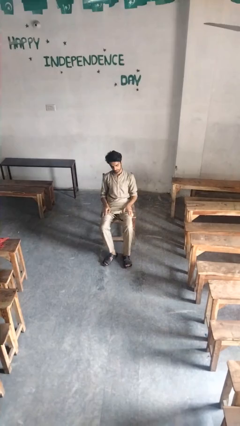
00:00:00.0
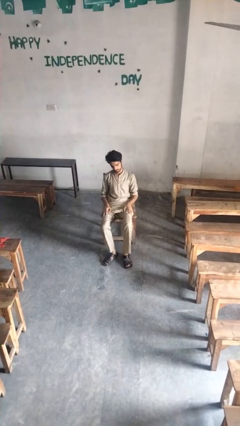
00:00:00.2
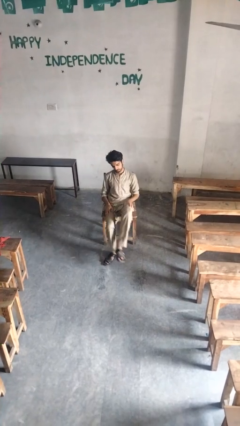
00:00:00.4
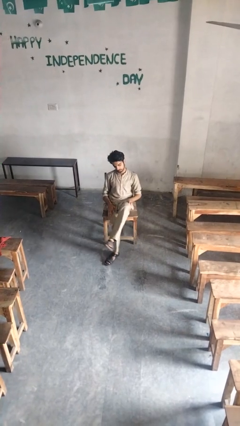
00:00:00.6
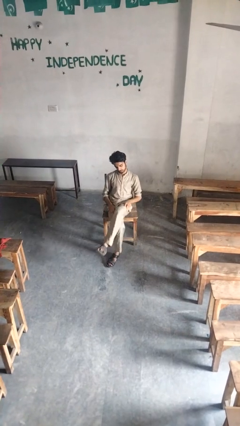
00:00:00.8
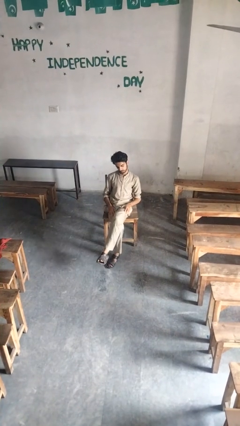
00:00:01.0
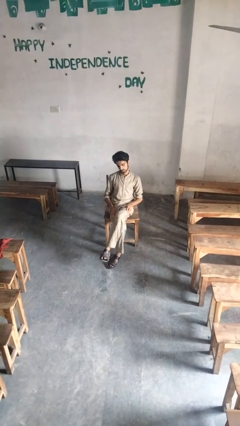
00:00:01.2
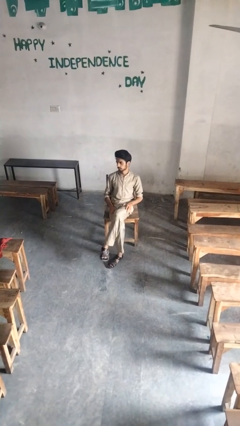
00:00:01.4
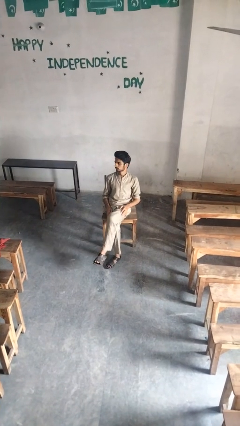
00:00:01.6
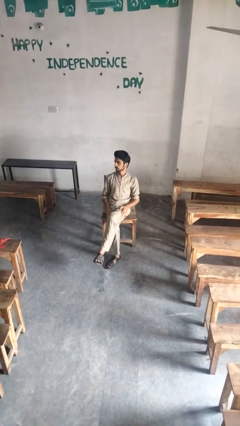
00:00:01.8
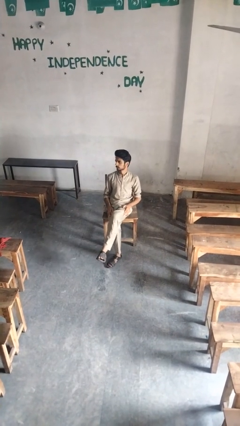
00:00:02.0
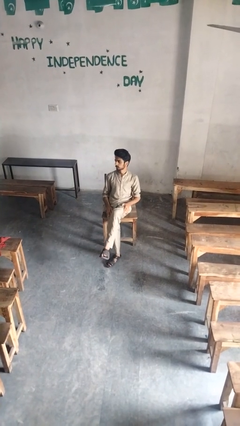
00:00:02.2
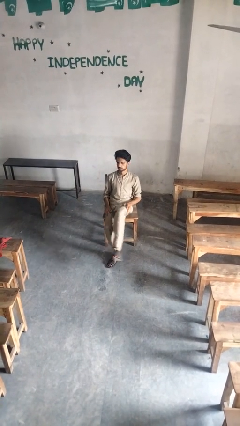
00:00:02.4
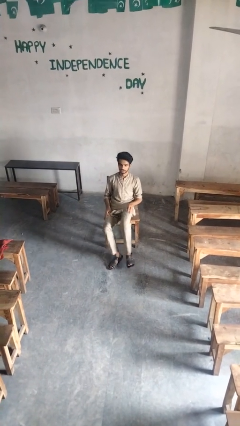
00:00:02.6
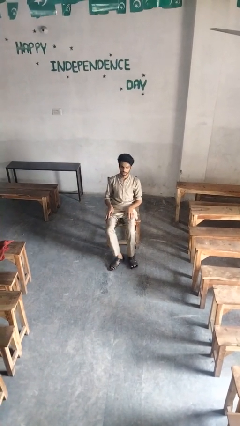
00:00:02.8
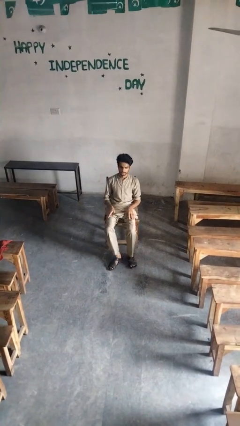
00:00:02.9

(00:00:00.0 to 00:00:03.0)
person crosses legs

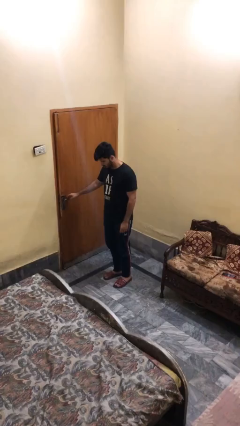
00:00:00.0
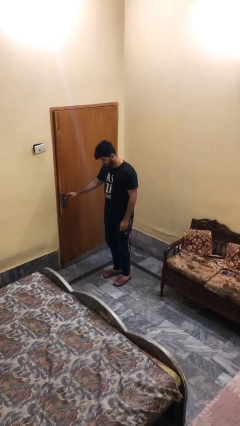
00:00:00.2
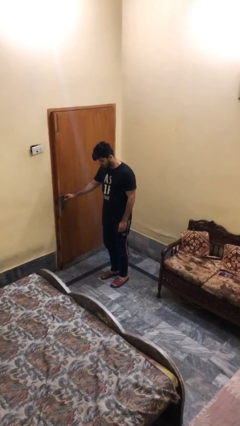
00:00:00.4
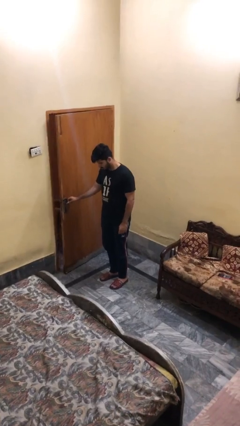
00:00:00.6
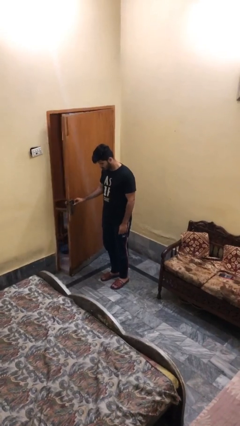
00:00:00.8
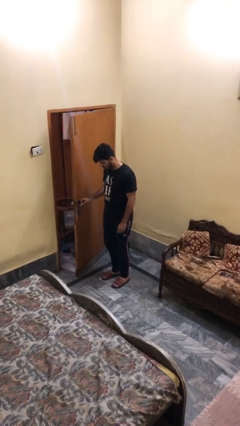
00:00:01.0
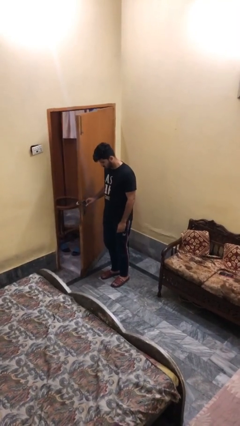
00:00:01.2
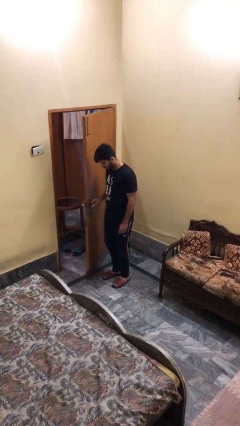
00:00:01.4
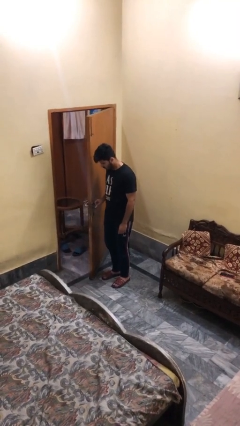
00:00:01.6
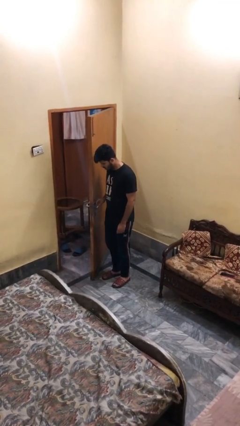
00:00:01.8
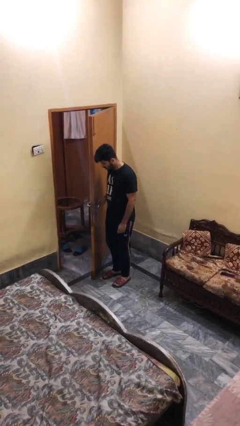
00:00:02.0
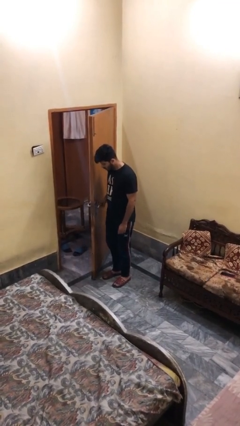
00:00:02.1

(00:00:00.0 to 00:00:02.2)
person opens facility door

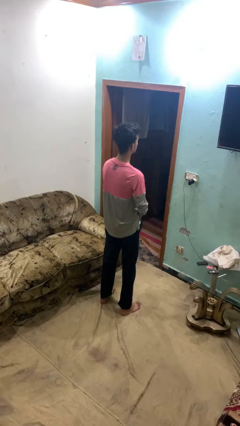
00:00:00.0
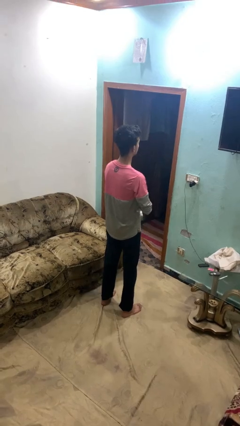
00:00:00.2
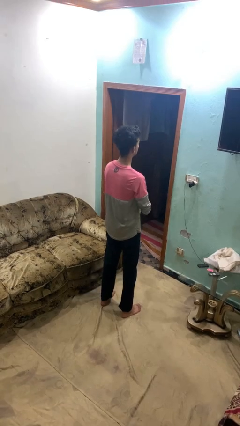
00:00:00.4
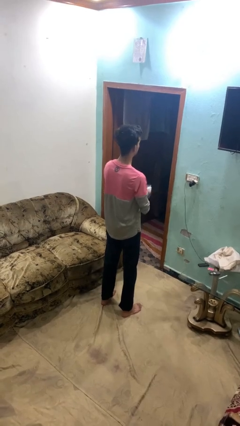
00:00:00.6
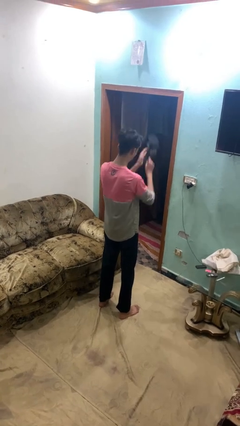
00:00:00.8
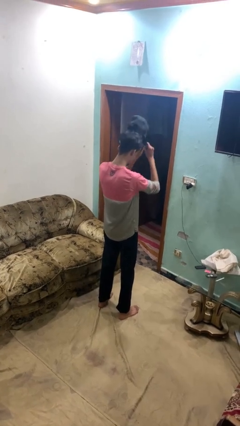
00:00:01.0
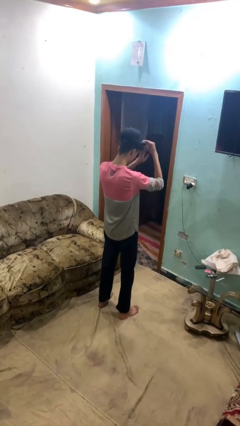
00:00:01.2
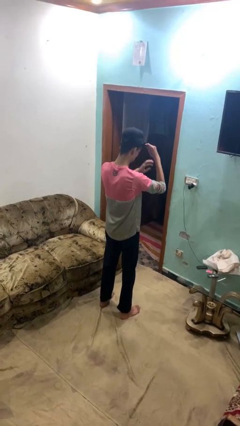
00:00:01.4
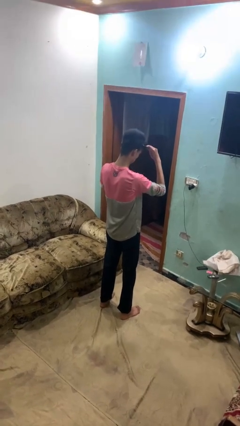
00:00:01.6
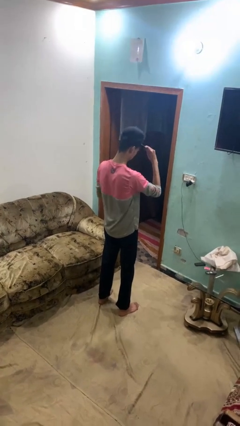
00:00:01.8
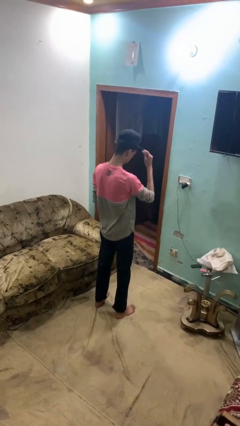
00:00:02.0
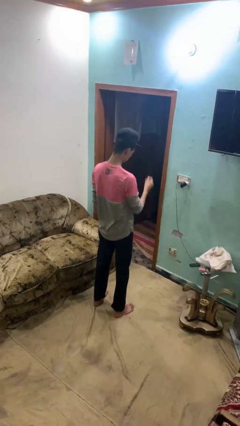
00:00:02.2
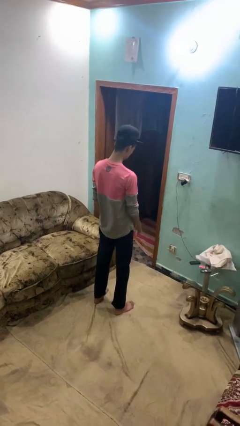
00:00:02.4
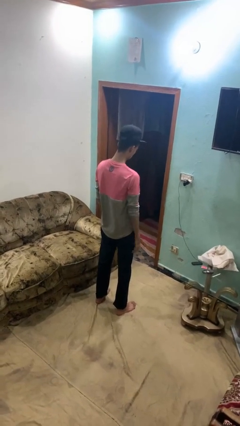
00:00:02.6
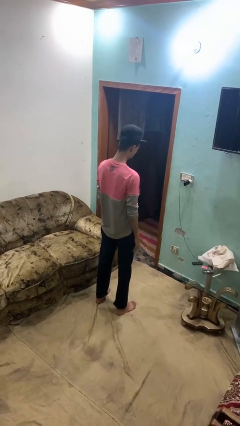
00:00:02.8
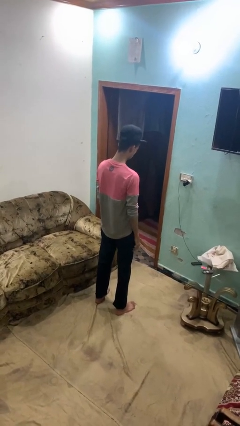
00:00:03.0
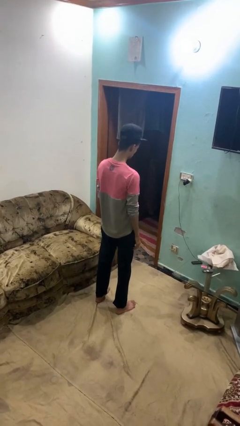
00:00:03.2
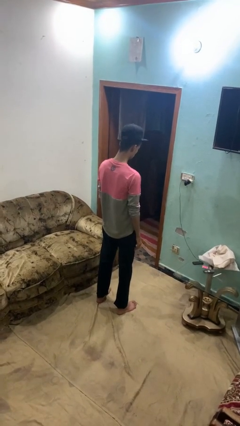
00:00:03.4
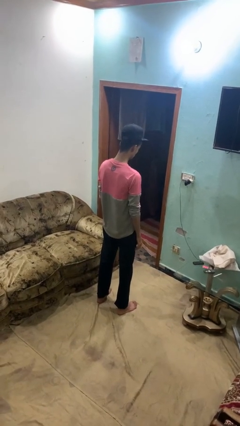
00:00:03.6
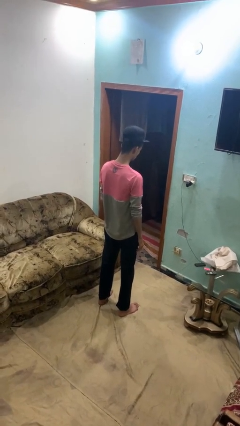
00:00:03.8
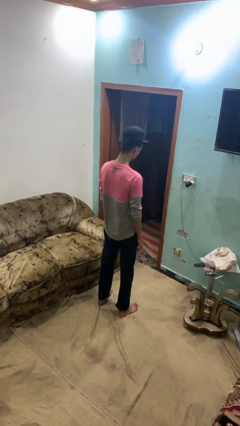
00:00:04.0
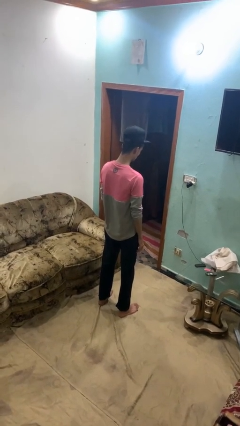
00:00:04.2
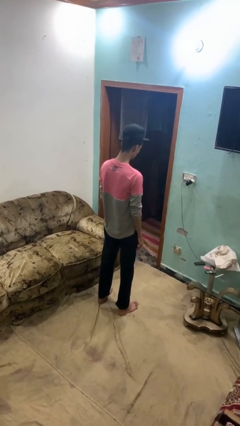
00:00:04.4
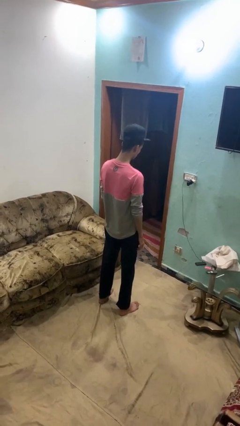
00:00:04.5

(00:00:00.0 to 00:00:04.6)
person puts on hat

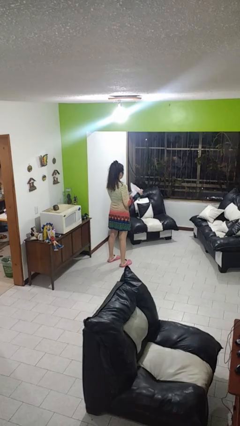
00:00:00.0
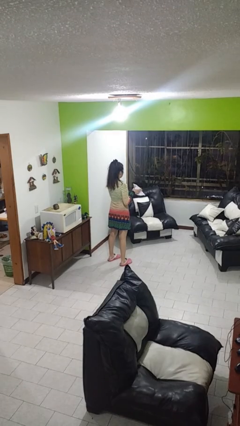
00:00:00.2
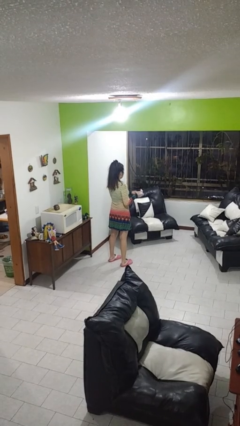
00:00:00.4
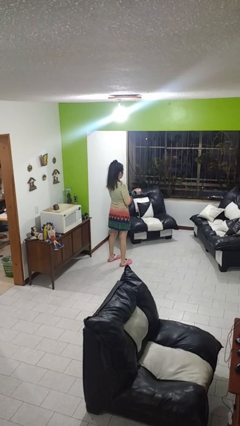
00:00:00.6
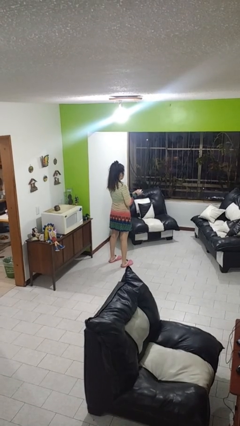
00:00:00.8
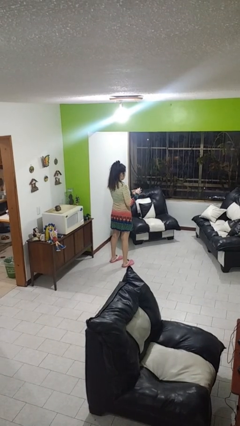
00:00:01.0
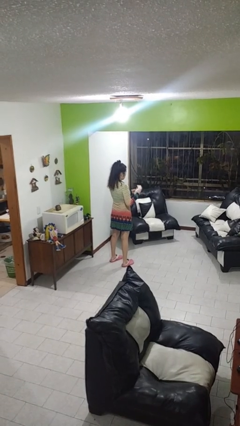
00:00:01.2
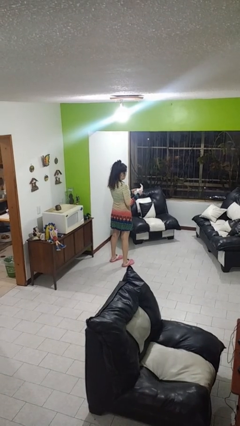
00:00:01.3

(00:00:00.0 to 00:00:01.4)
person crumples paper

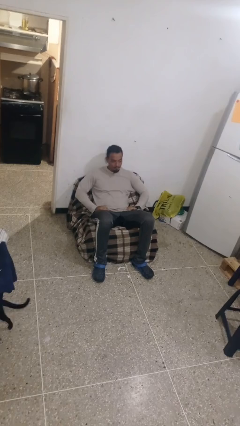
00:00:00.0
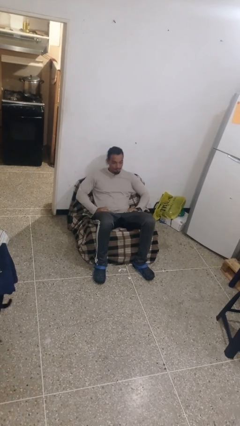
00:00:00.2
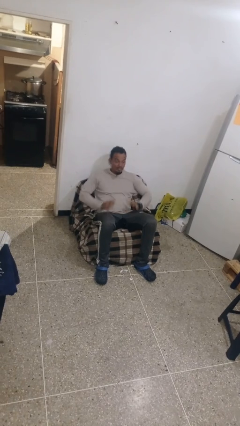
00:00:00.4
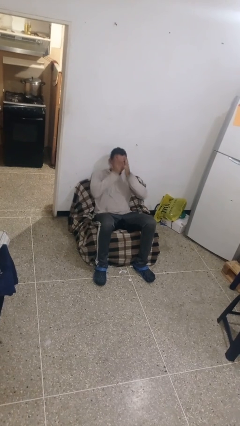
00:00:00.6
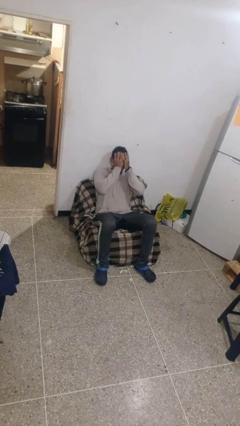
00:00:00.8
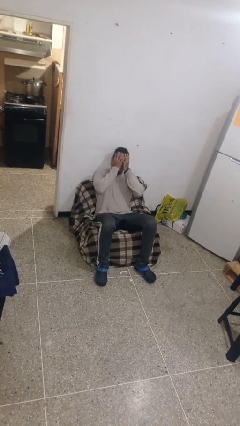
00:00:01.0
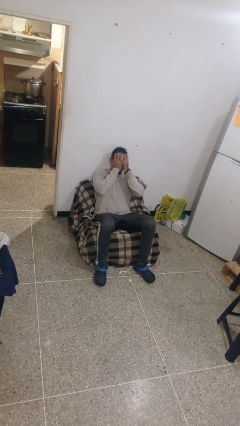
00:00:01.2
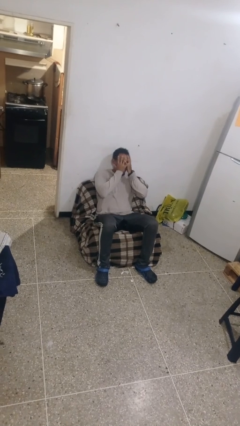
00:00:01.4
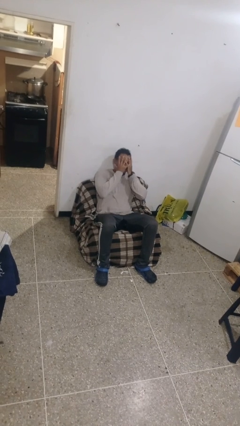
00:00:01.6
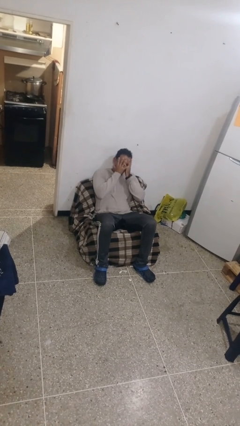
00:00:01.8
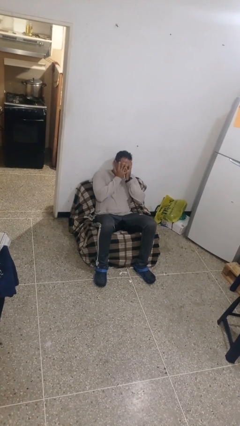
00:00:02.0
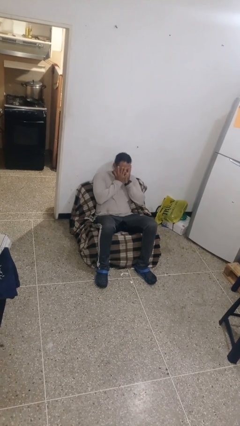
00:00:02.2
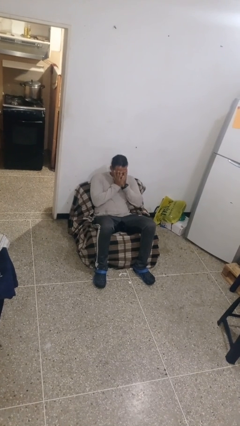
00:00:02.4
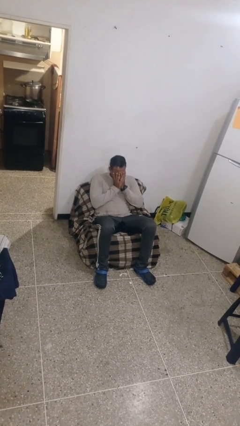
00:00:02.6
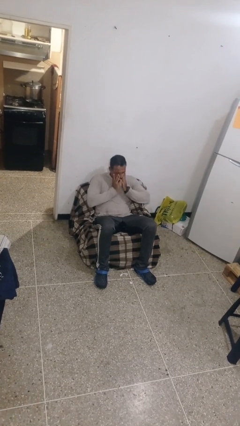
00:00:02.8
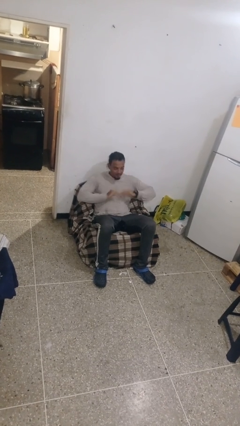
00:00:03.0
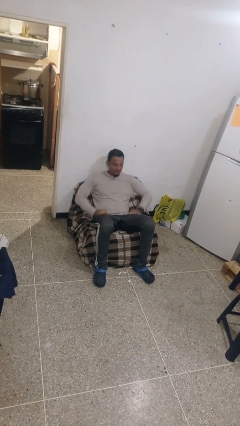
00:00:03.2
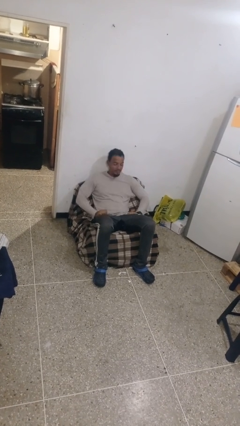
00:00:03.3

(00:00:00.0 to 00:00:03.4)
person covers face with hands

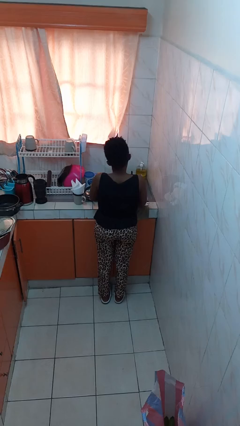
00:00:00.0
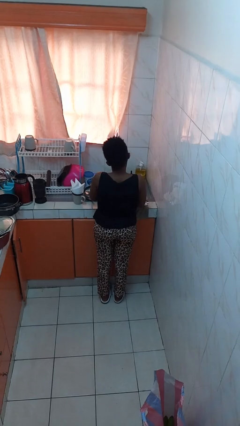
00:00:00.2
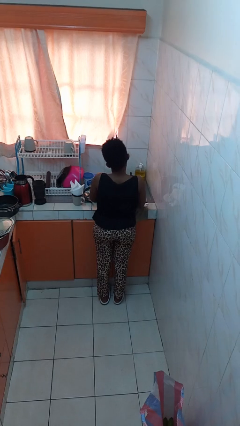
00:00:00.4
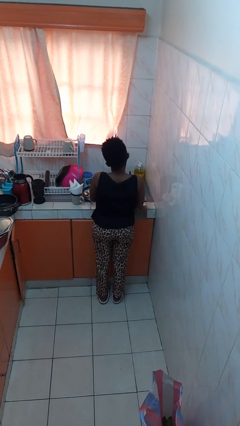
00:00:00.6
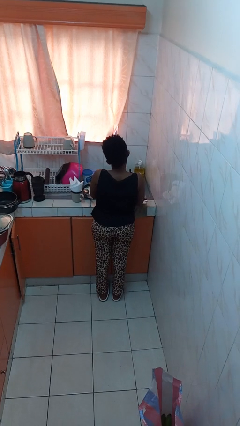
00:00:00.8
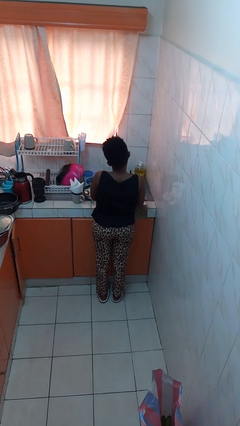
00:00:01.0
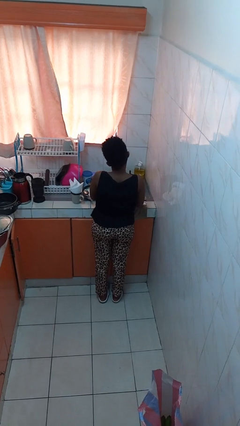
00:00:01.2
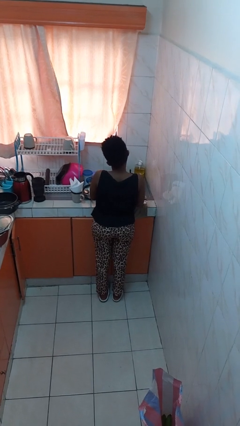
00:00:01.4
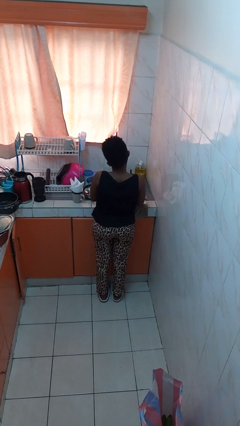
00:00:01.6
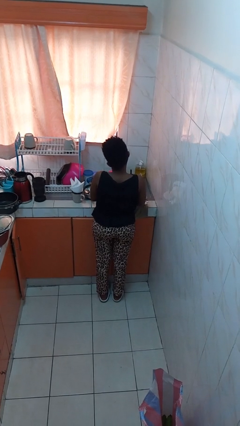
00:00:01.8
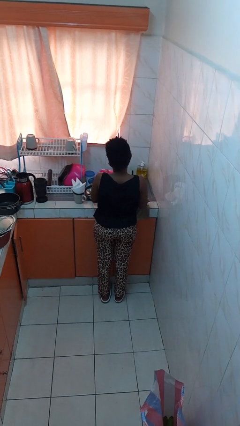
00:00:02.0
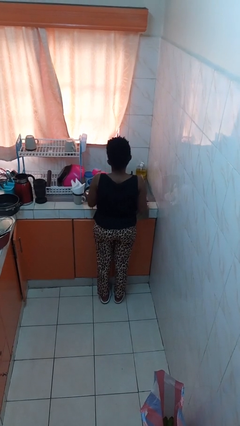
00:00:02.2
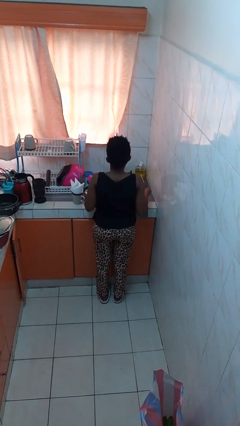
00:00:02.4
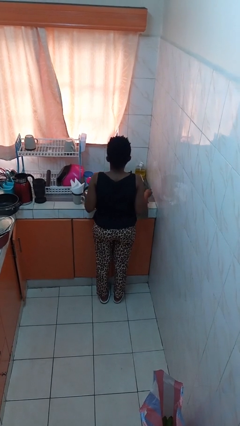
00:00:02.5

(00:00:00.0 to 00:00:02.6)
person washes dish

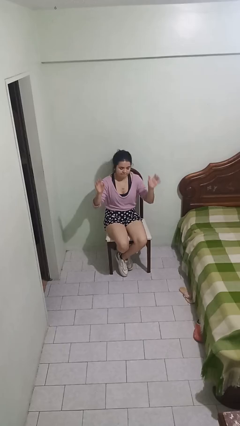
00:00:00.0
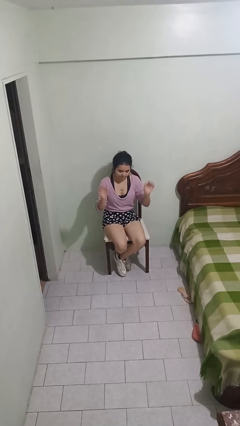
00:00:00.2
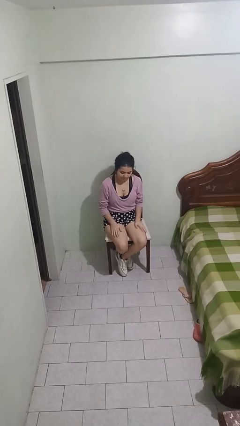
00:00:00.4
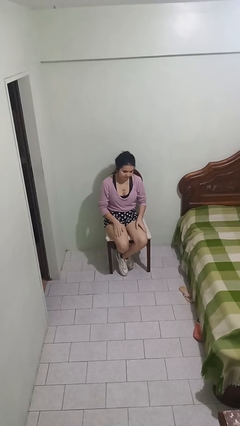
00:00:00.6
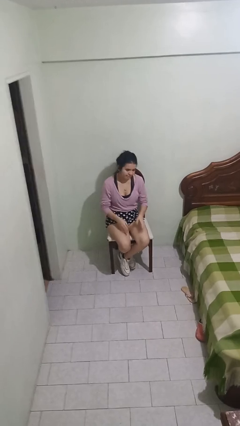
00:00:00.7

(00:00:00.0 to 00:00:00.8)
person slaps hands on thighs
